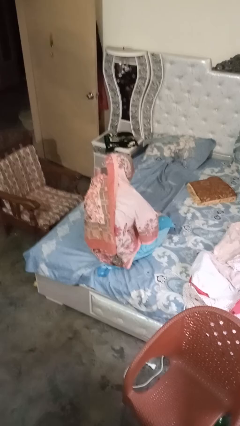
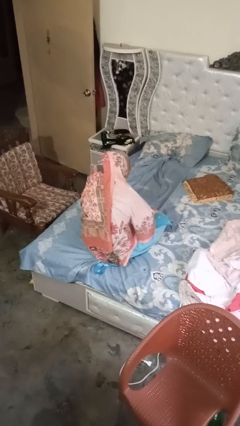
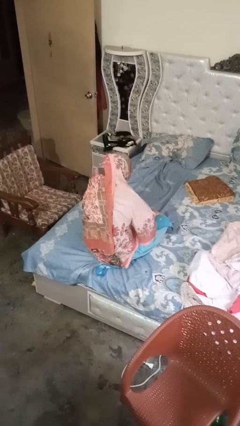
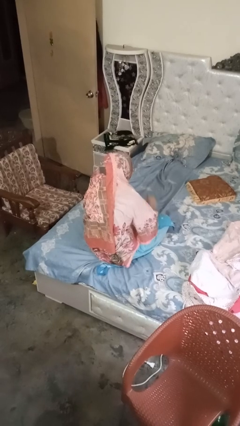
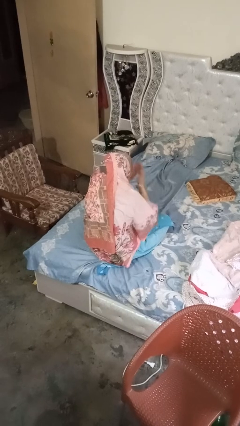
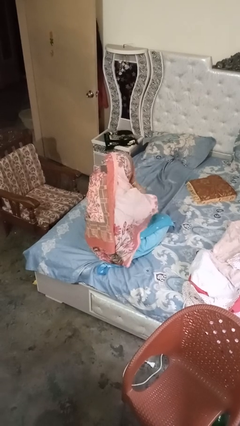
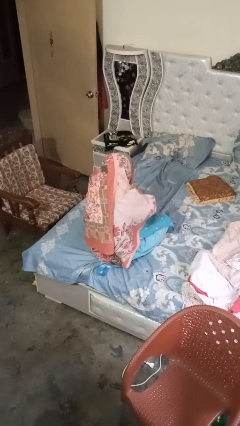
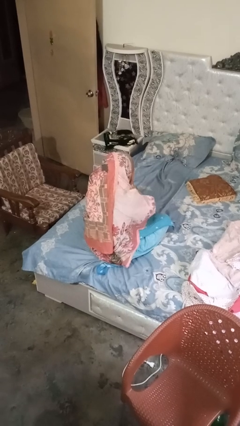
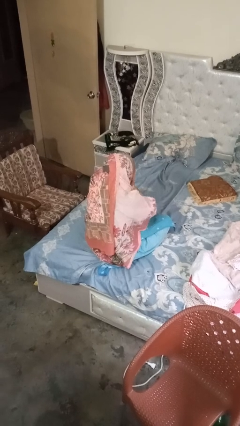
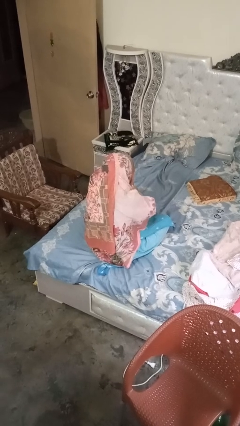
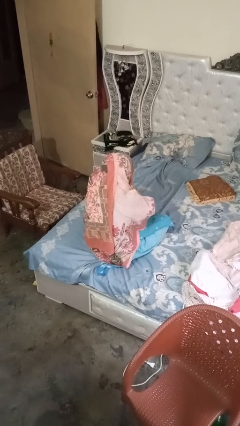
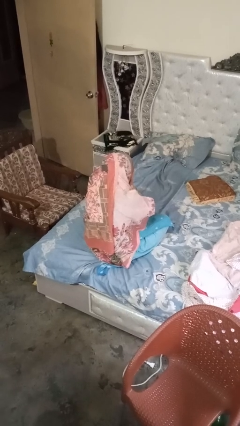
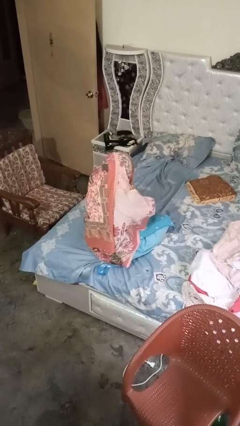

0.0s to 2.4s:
person covers face with hands

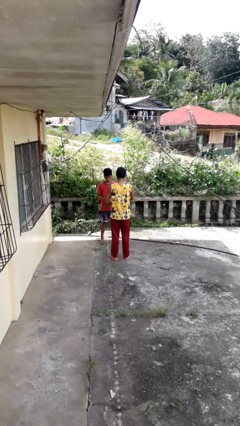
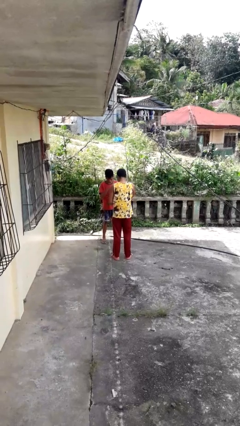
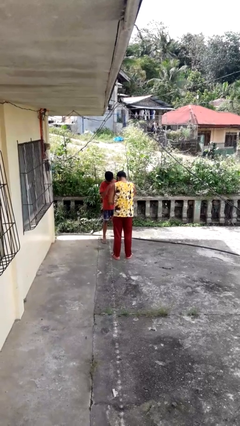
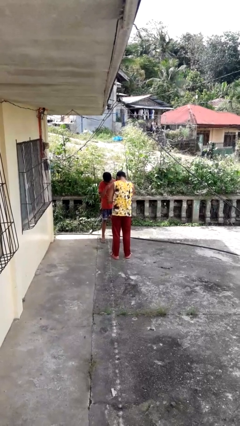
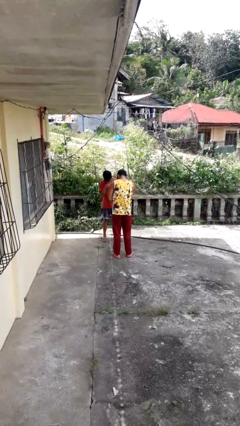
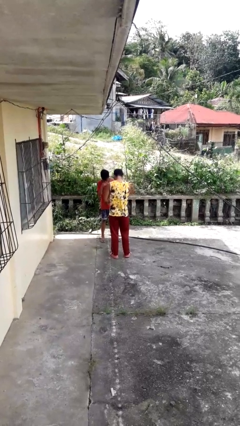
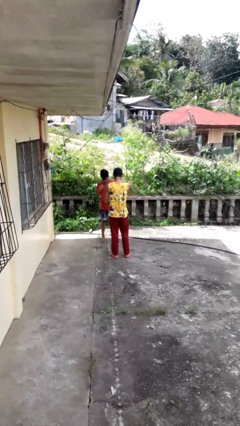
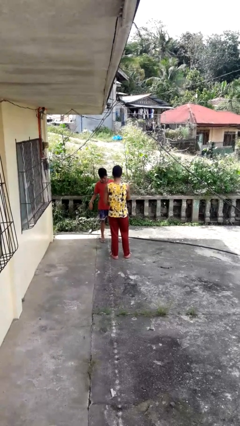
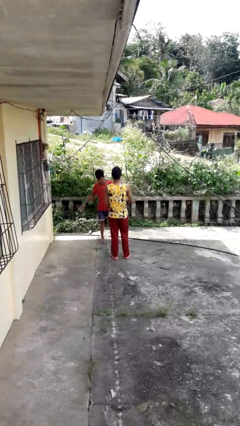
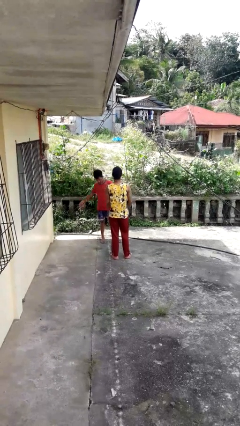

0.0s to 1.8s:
person laughs with person

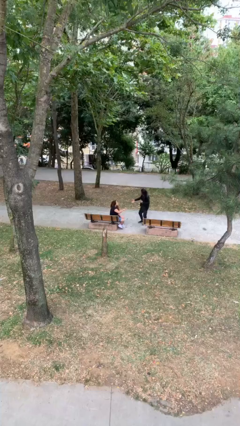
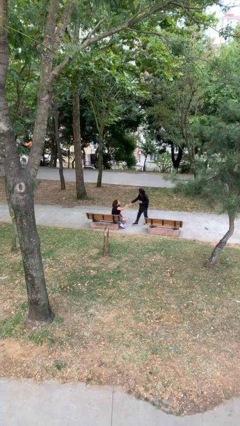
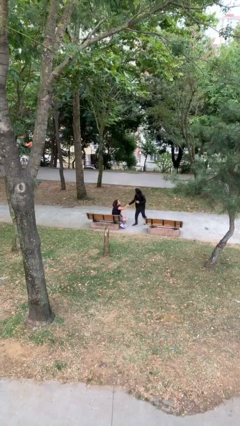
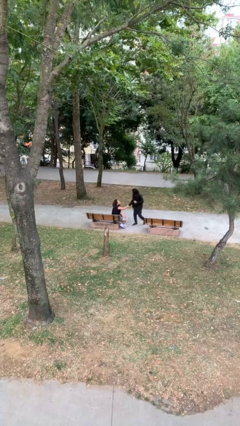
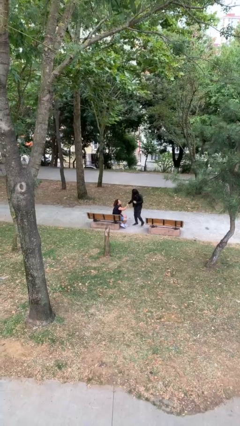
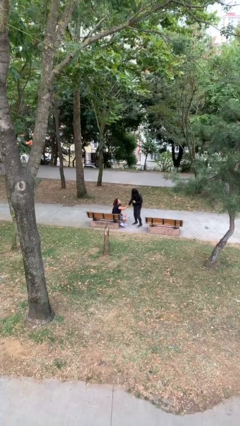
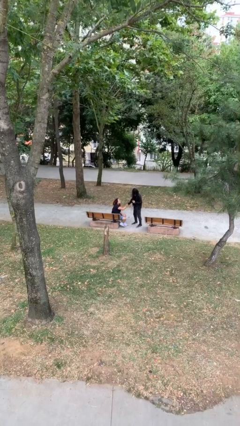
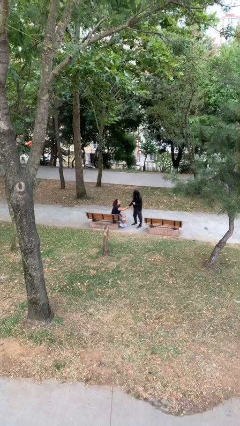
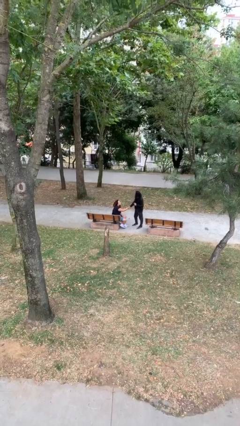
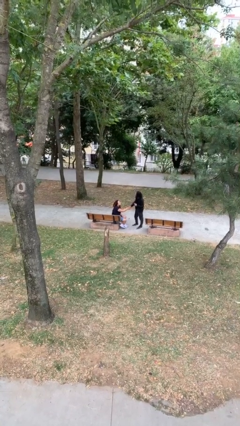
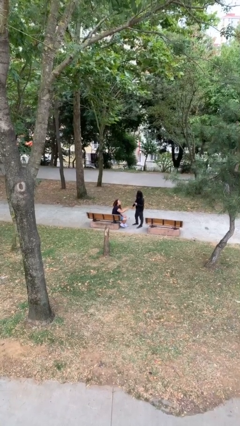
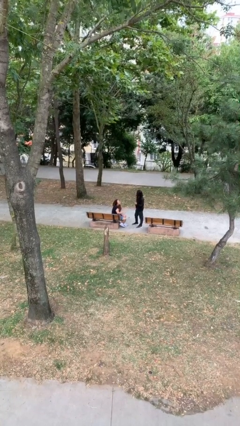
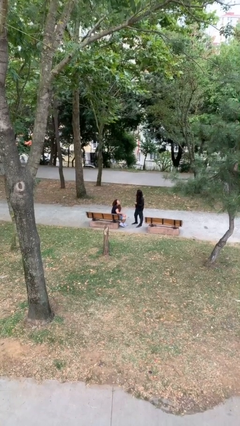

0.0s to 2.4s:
person shakes hand

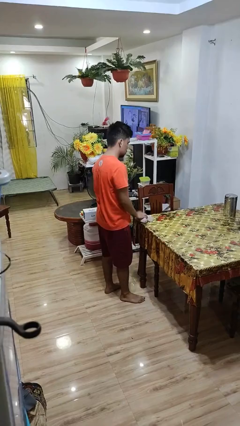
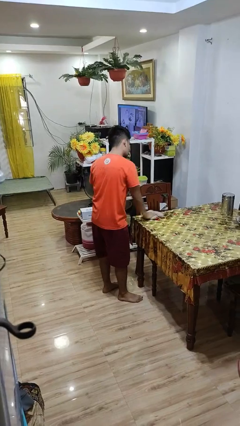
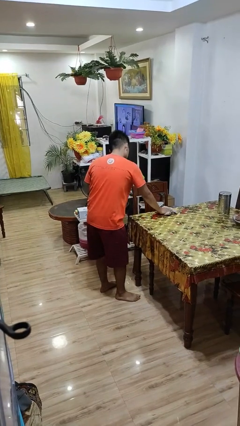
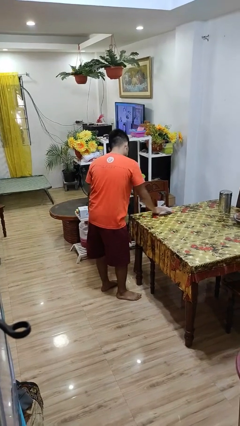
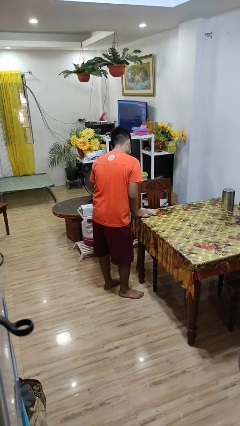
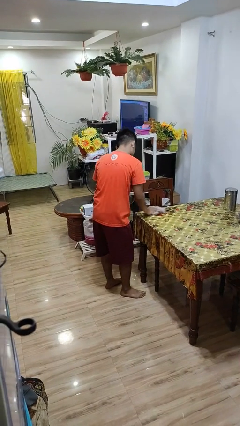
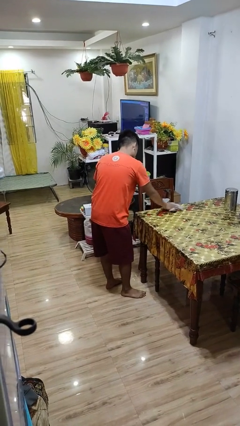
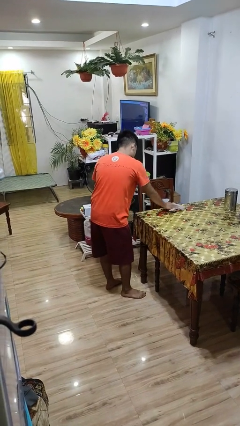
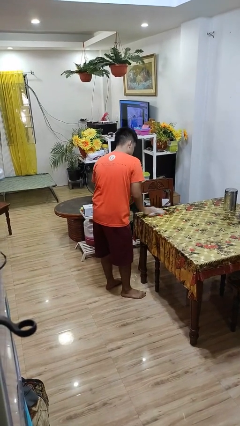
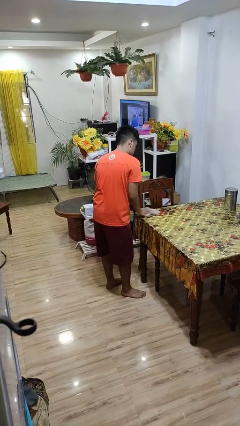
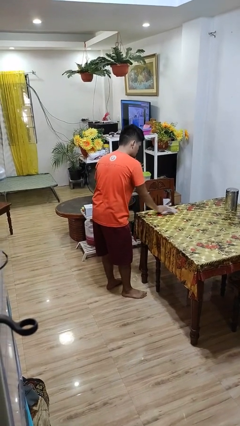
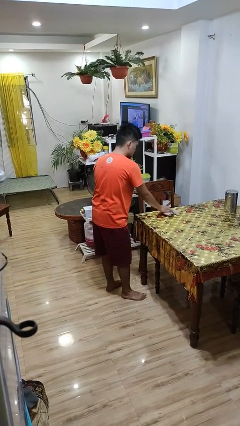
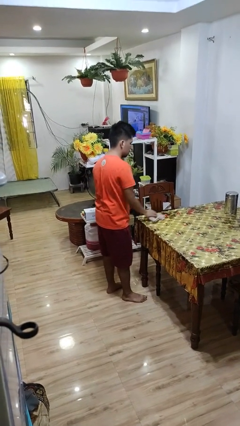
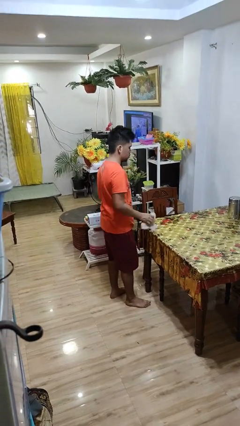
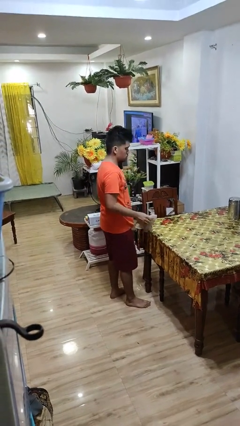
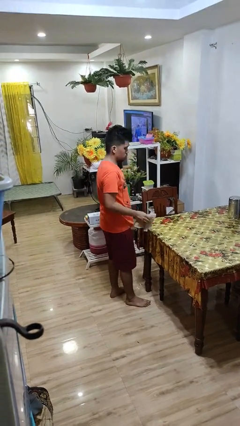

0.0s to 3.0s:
person cleans table with rag

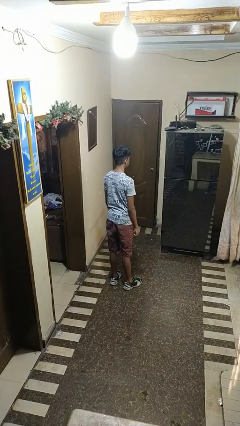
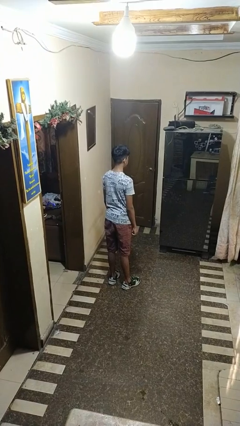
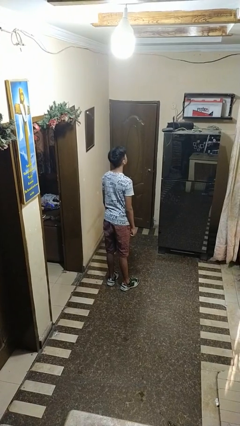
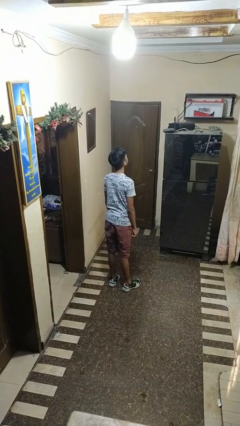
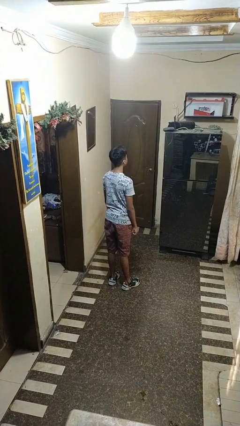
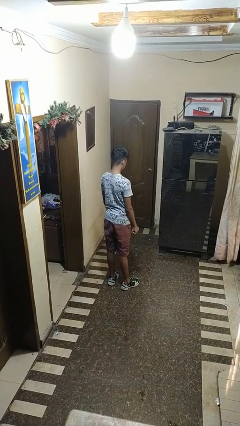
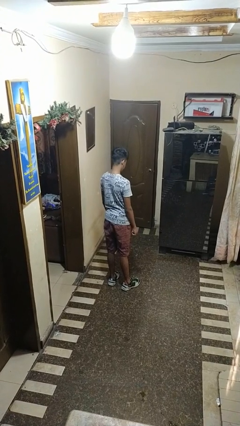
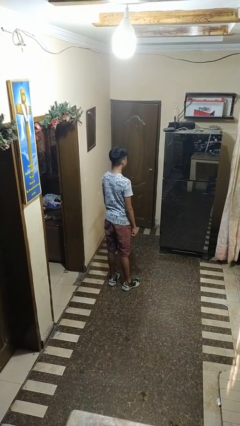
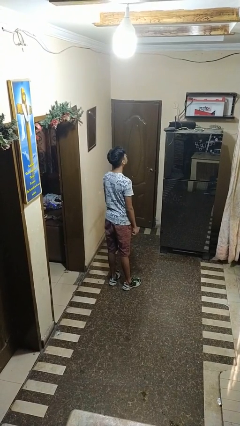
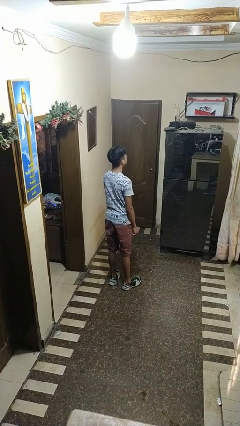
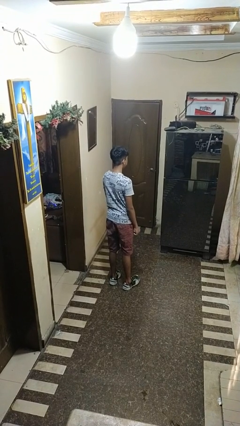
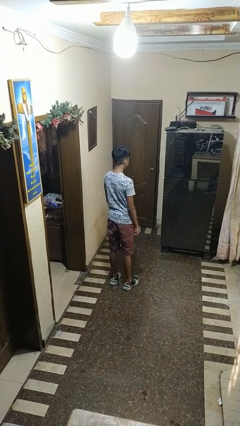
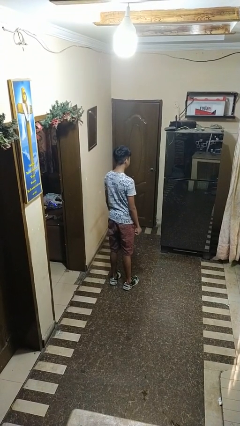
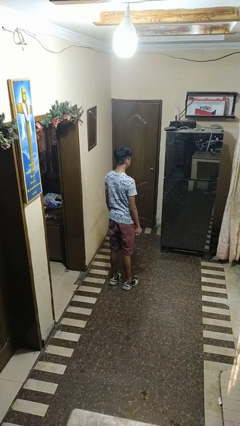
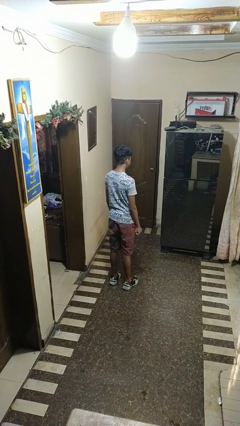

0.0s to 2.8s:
person shakes head

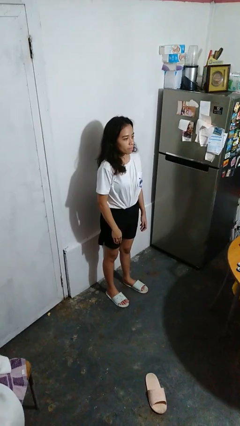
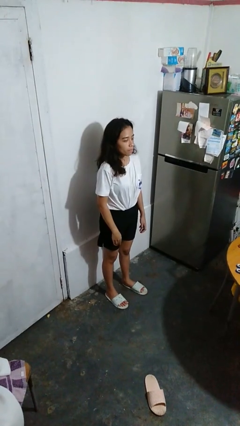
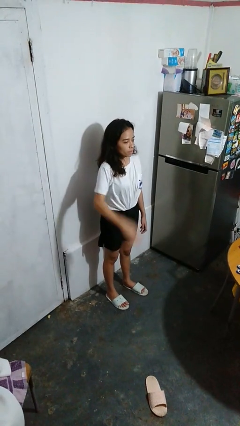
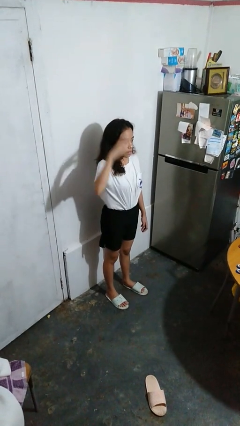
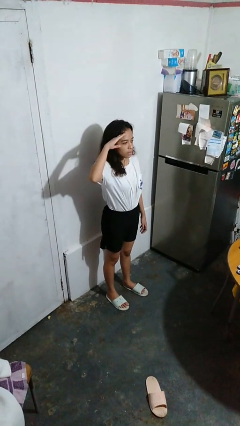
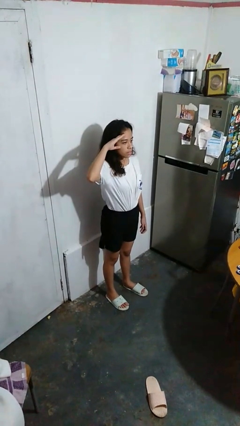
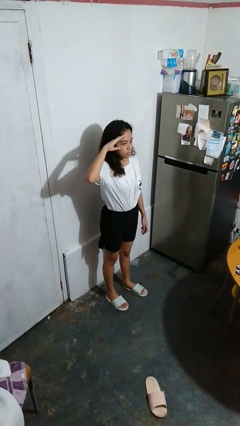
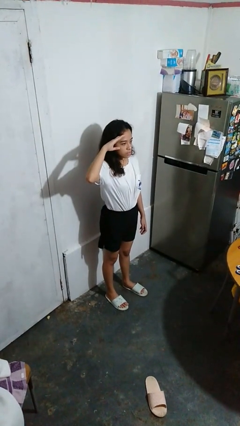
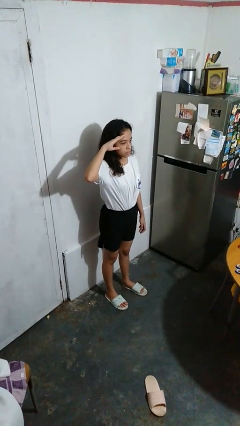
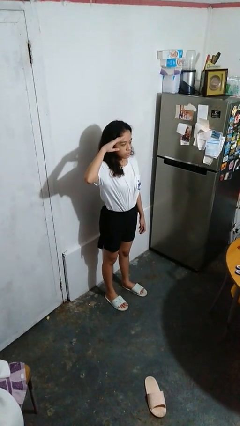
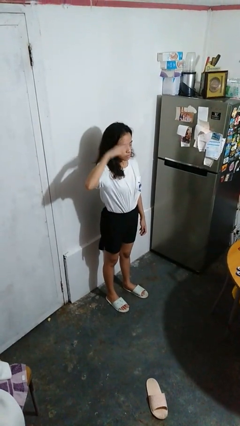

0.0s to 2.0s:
person salutes

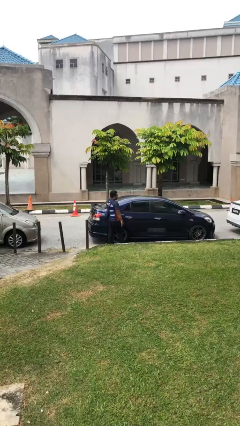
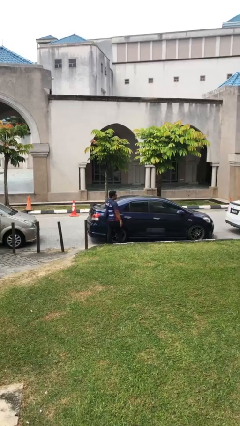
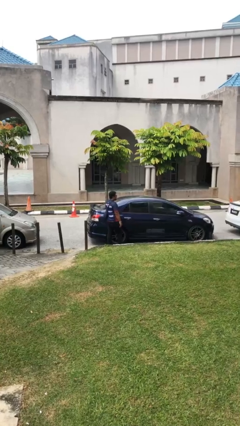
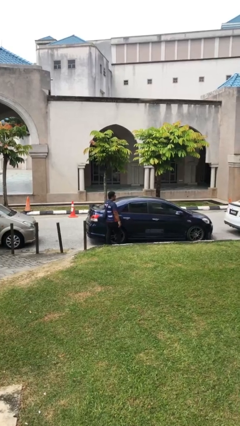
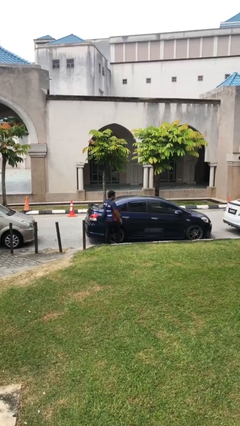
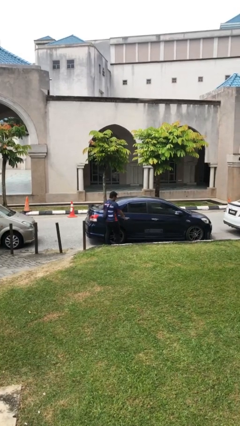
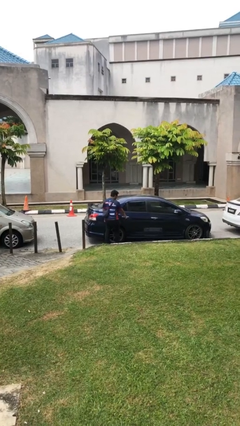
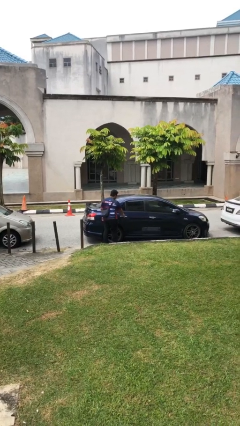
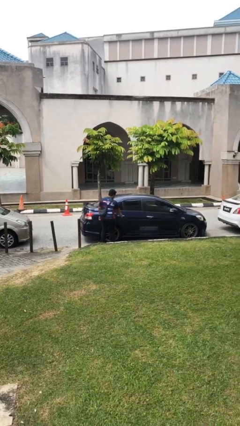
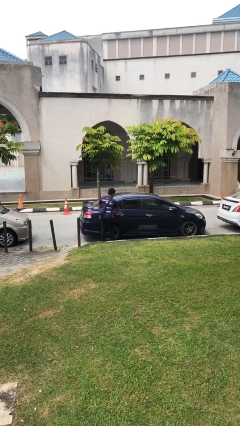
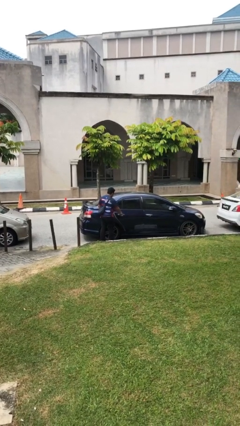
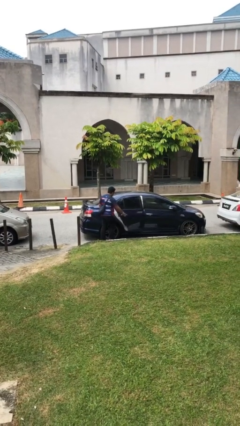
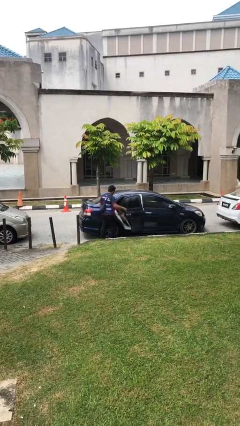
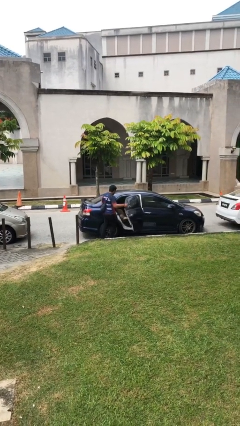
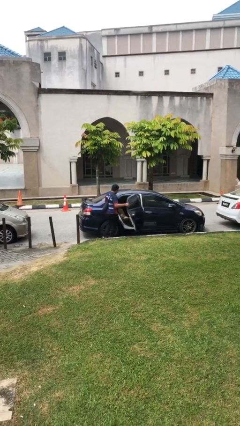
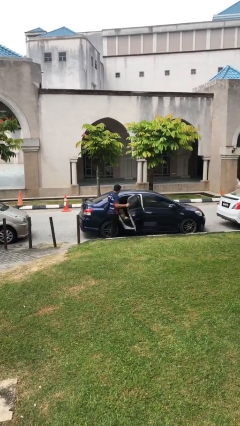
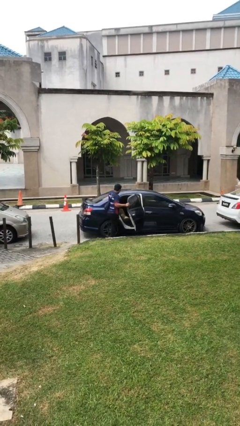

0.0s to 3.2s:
person opens car door

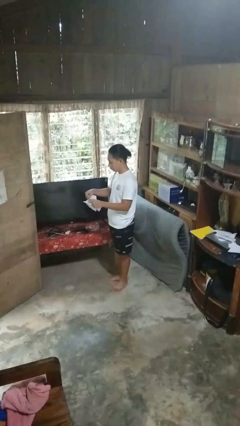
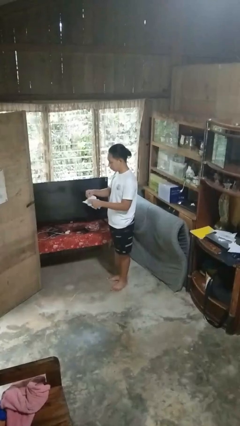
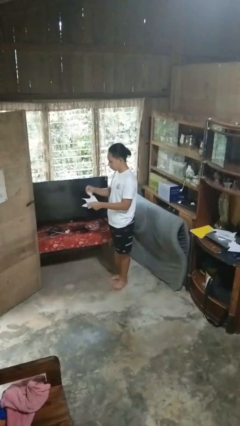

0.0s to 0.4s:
person tears paper
